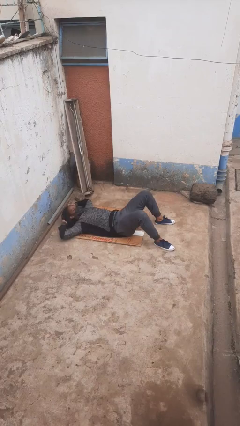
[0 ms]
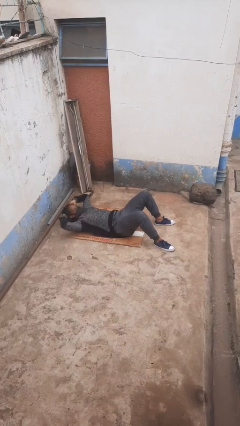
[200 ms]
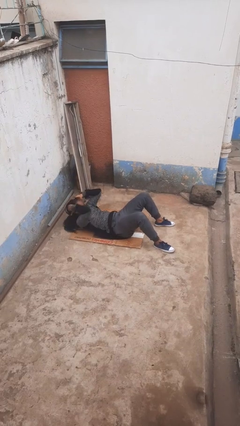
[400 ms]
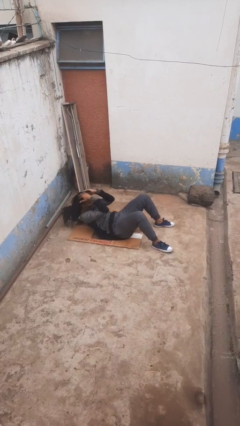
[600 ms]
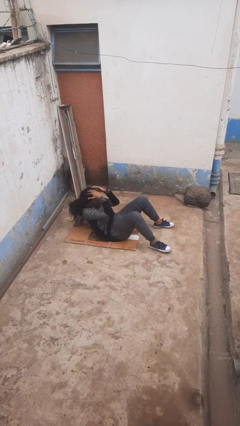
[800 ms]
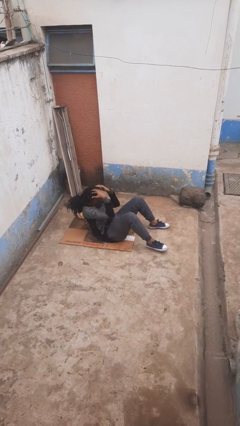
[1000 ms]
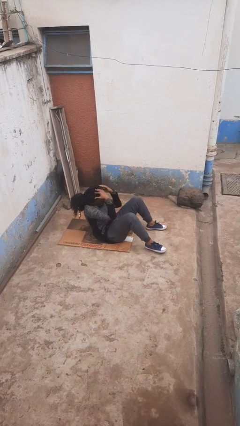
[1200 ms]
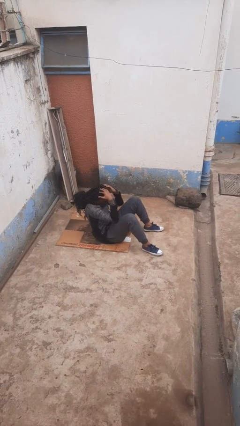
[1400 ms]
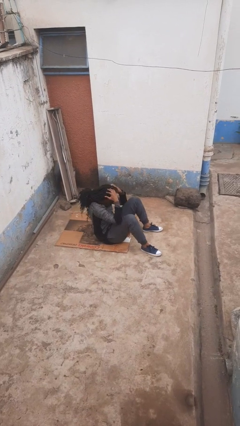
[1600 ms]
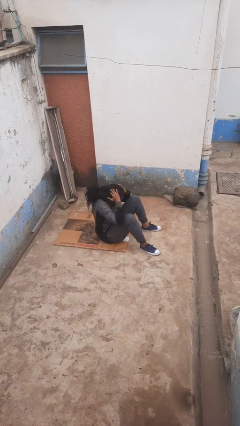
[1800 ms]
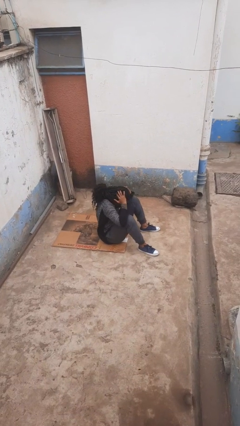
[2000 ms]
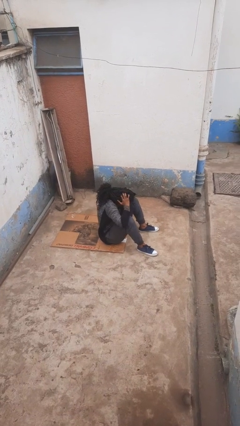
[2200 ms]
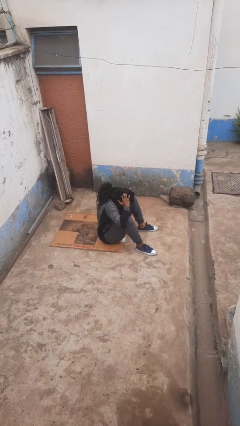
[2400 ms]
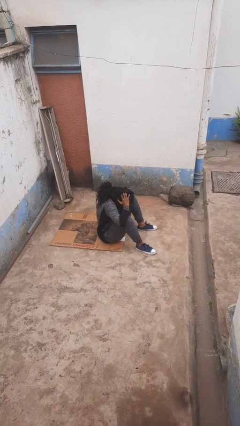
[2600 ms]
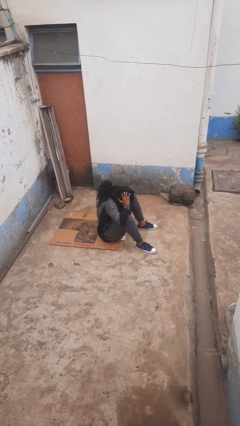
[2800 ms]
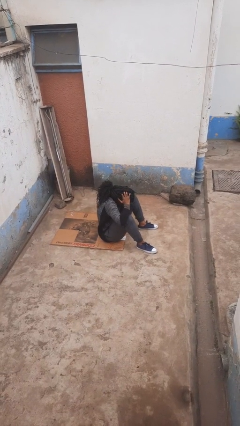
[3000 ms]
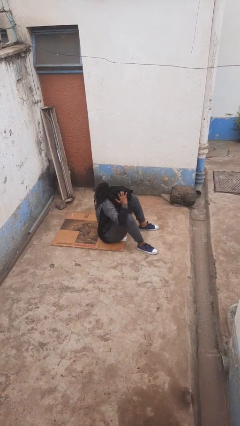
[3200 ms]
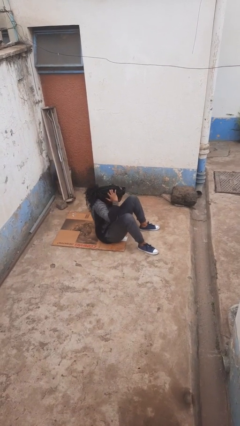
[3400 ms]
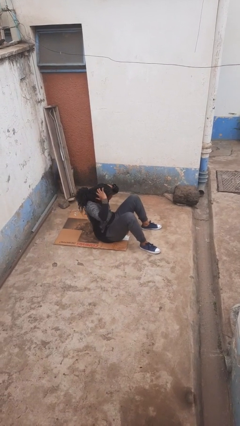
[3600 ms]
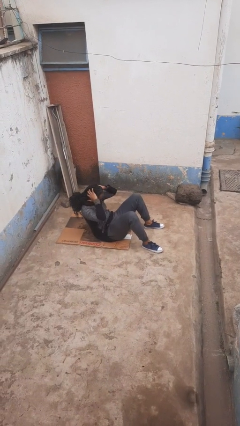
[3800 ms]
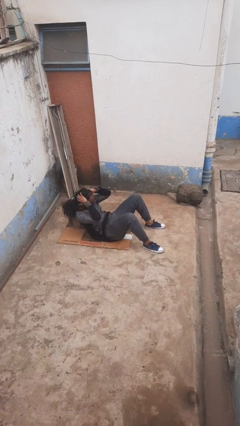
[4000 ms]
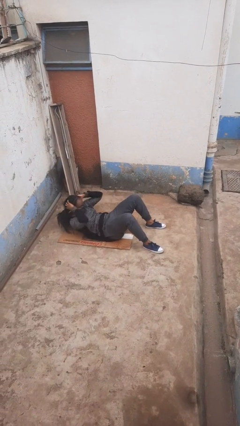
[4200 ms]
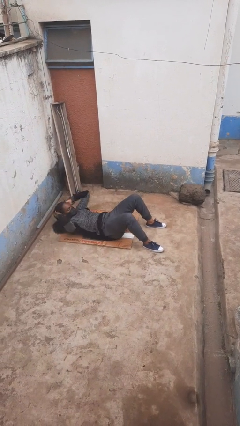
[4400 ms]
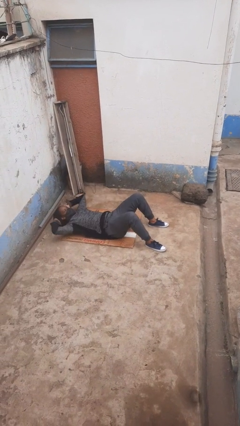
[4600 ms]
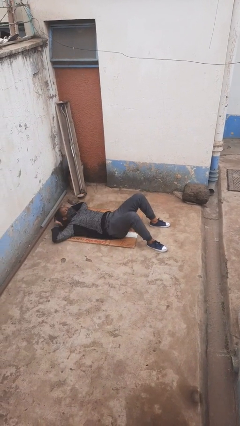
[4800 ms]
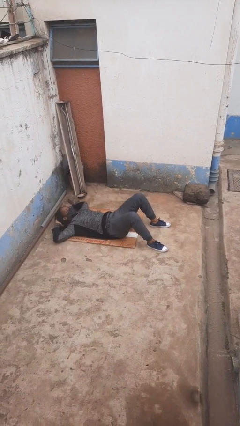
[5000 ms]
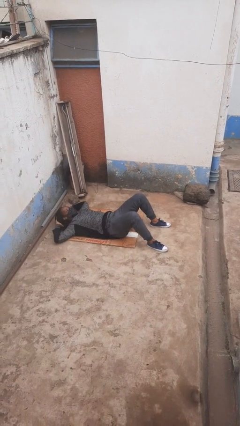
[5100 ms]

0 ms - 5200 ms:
person exercises with situp

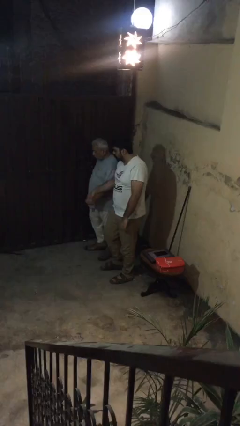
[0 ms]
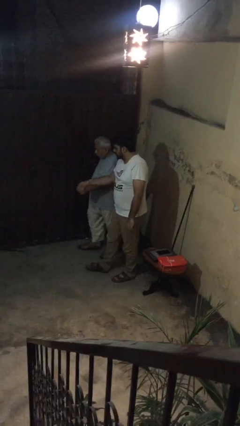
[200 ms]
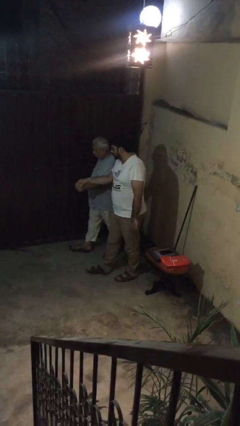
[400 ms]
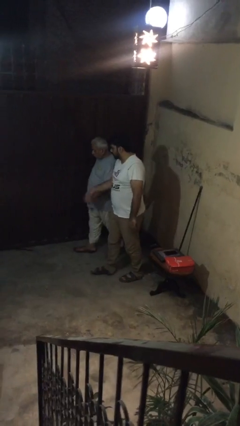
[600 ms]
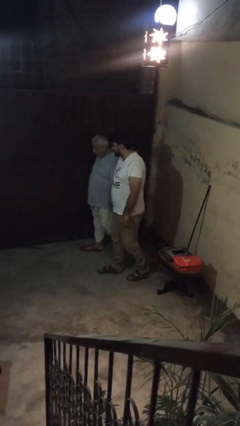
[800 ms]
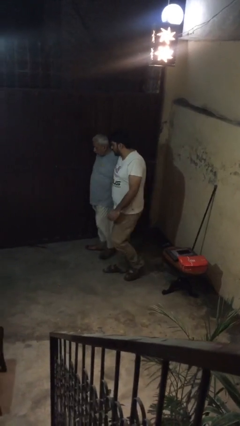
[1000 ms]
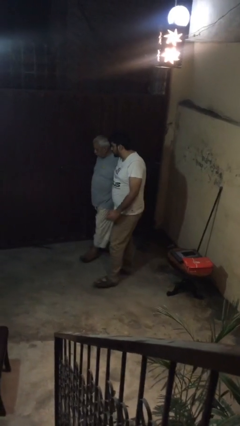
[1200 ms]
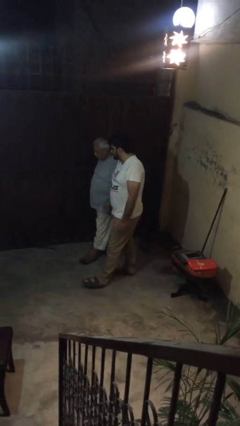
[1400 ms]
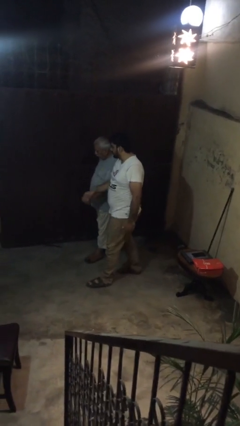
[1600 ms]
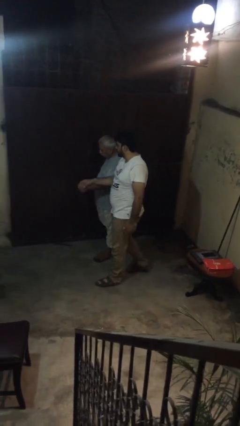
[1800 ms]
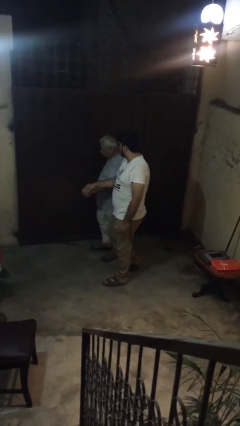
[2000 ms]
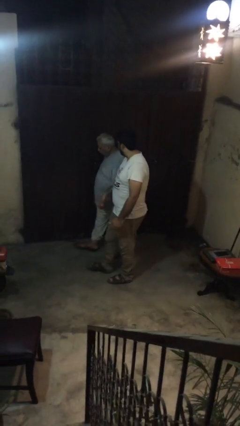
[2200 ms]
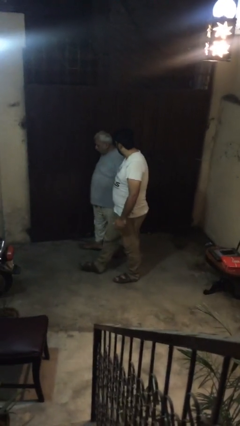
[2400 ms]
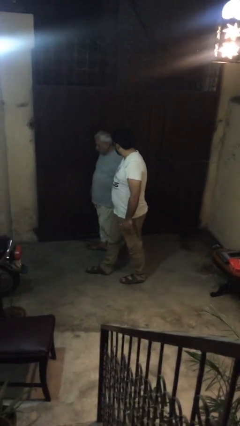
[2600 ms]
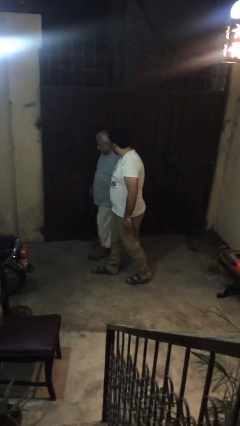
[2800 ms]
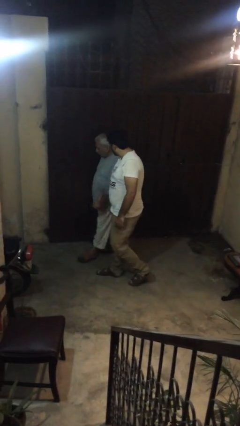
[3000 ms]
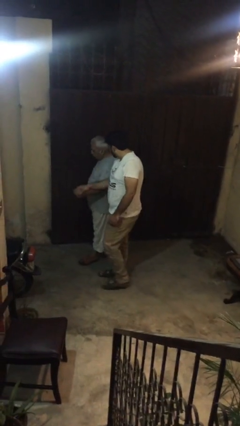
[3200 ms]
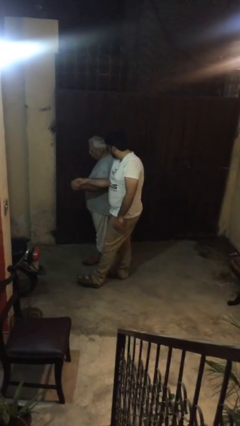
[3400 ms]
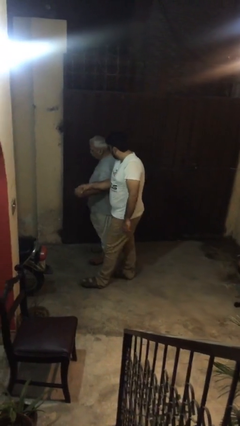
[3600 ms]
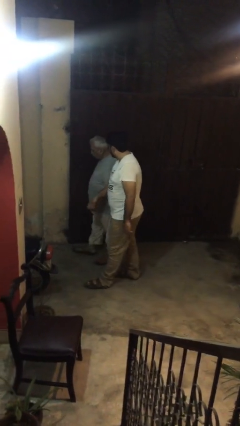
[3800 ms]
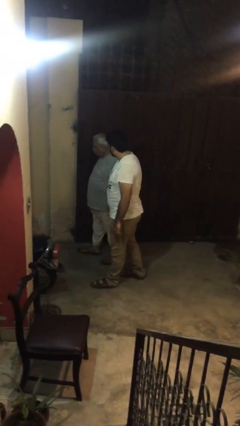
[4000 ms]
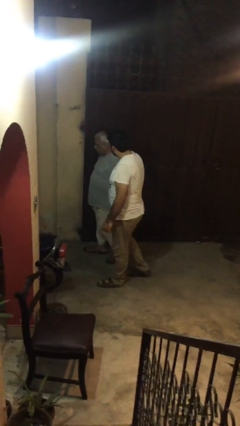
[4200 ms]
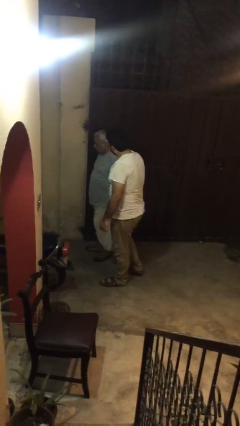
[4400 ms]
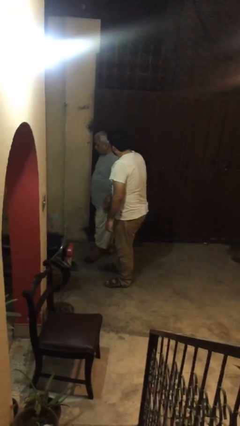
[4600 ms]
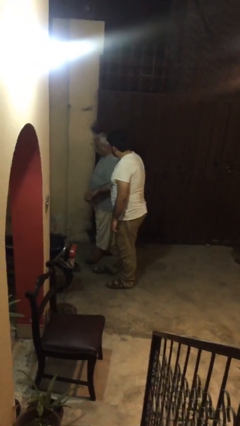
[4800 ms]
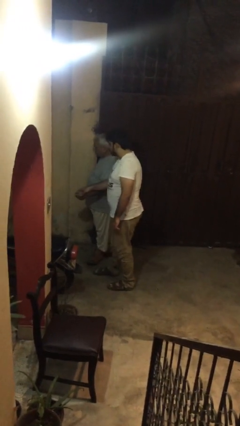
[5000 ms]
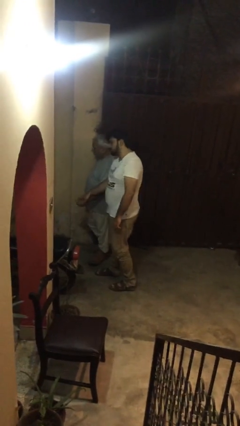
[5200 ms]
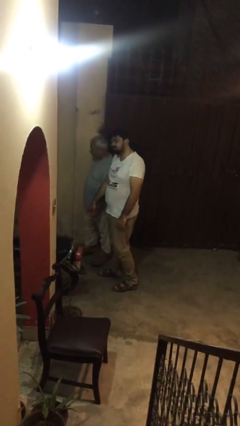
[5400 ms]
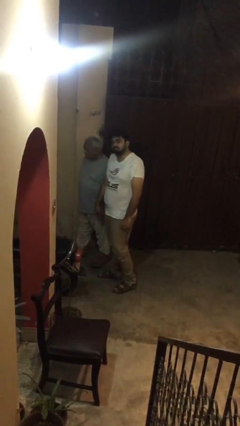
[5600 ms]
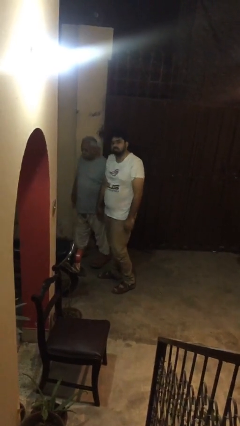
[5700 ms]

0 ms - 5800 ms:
person holds hand

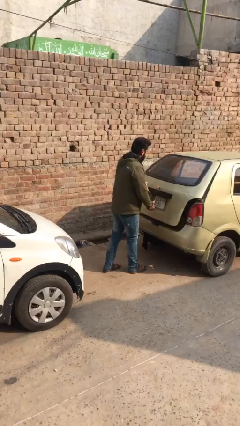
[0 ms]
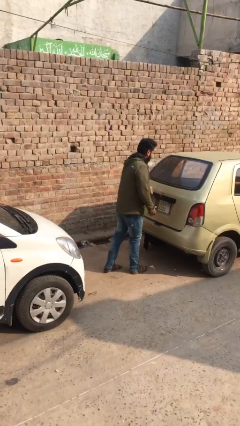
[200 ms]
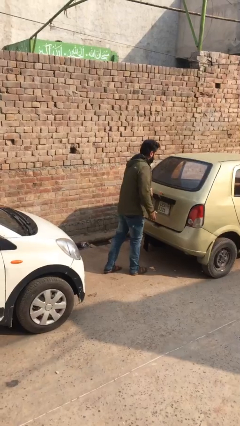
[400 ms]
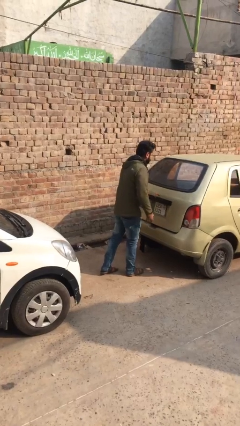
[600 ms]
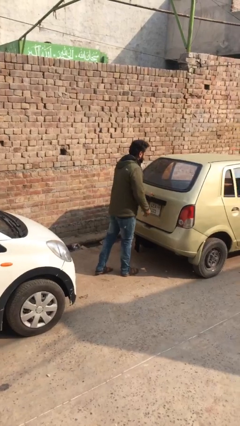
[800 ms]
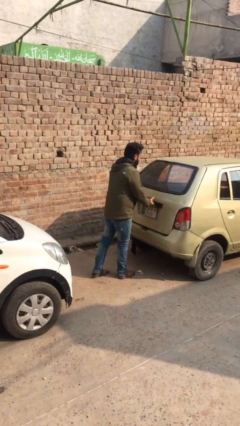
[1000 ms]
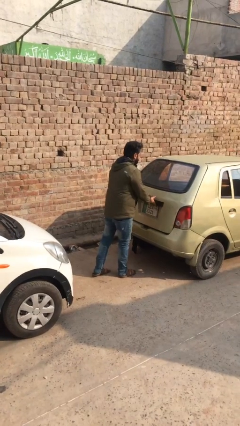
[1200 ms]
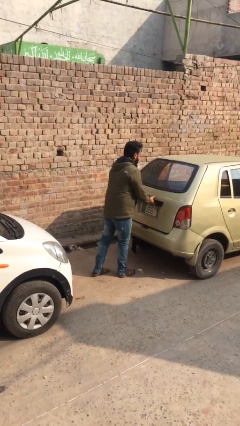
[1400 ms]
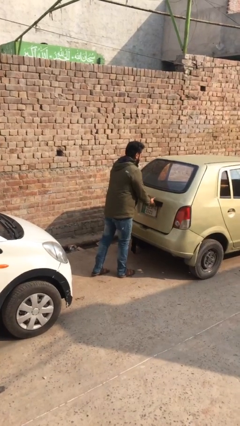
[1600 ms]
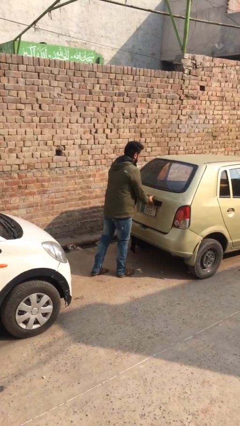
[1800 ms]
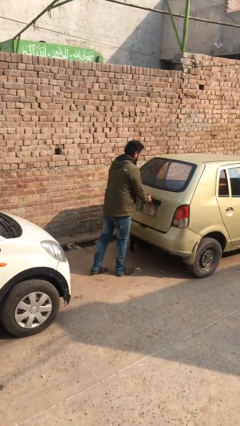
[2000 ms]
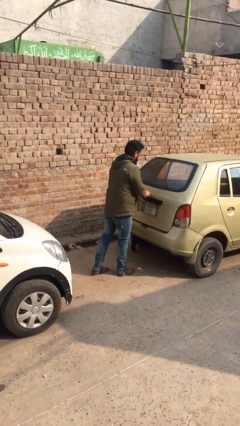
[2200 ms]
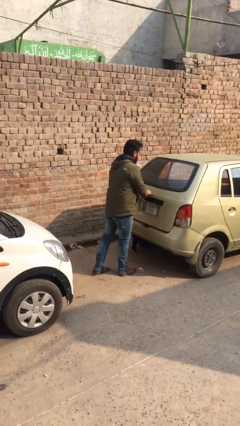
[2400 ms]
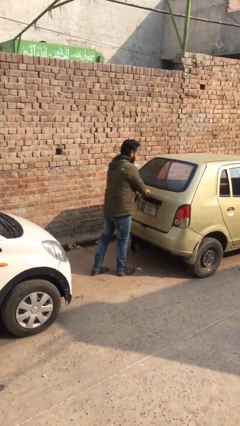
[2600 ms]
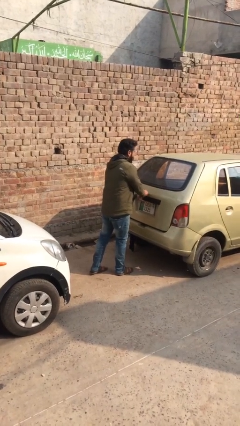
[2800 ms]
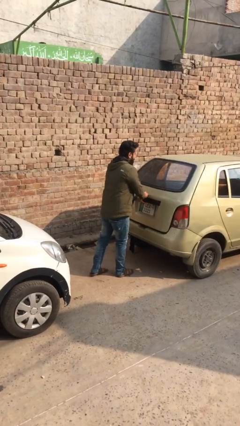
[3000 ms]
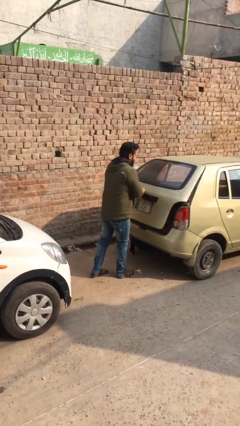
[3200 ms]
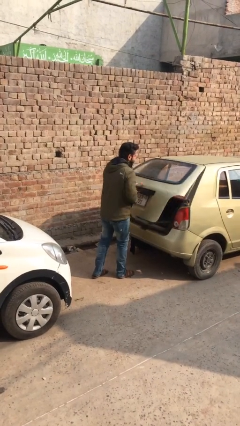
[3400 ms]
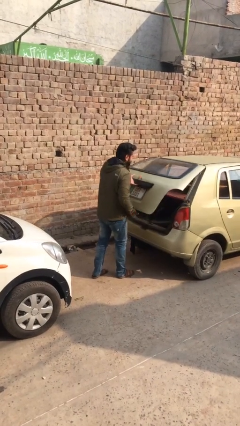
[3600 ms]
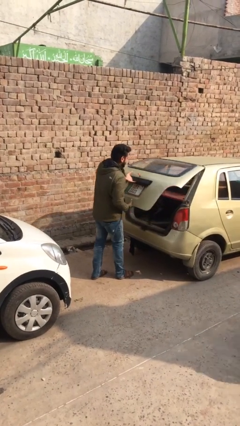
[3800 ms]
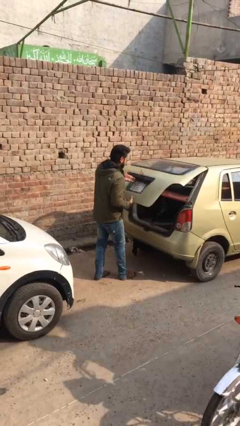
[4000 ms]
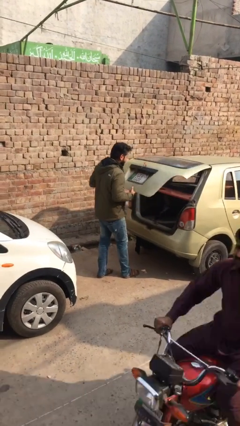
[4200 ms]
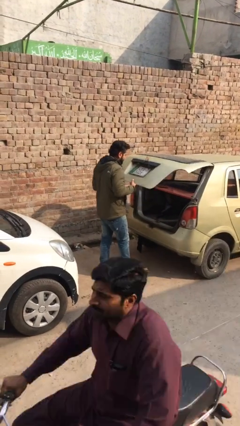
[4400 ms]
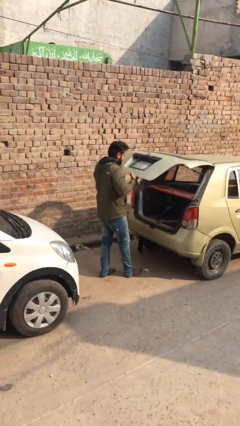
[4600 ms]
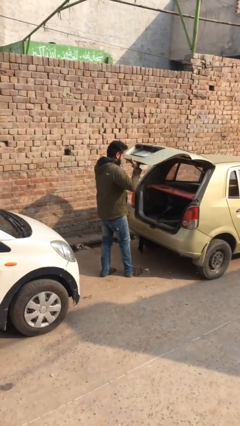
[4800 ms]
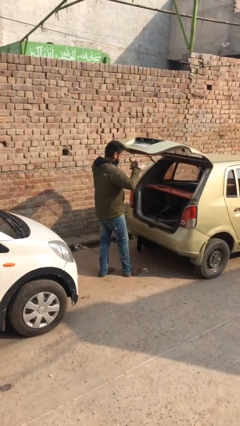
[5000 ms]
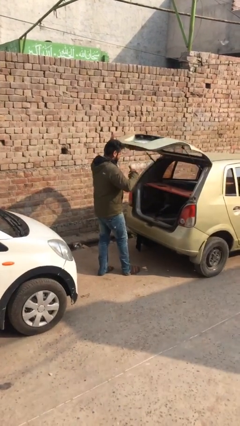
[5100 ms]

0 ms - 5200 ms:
person opens car trunk

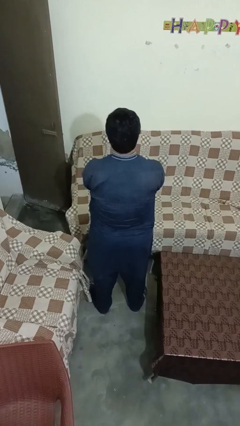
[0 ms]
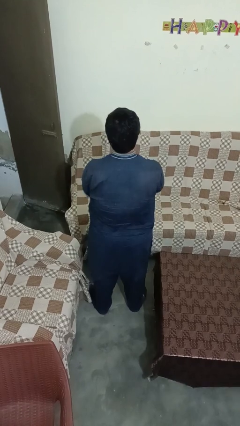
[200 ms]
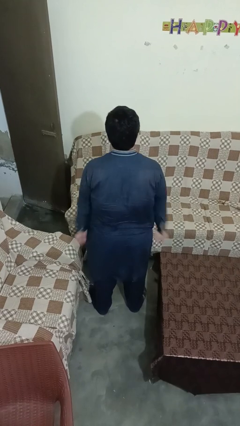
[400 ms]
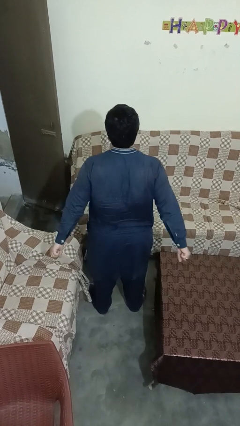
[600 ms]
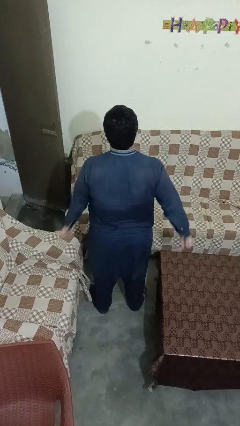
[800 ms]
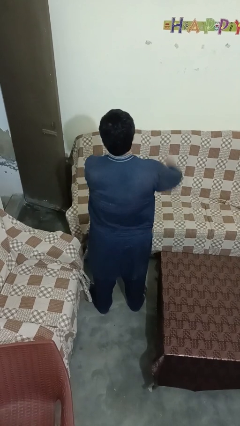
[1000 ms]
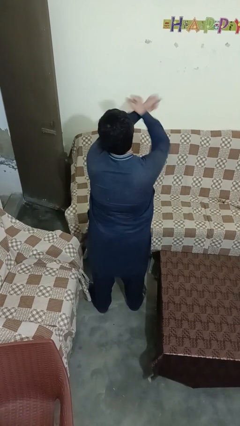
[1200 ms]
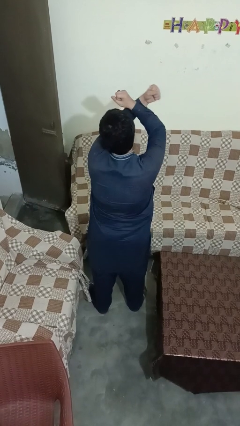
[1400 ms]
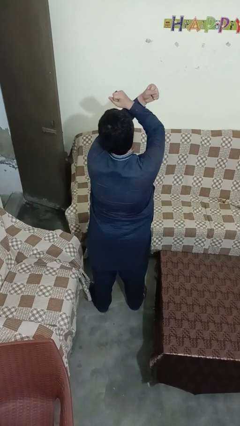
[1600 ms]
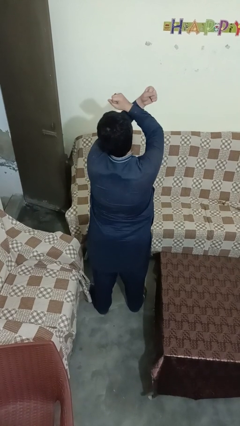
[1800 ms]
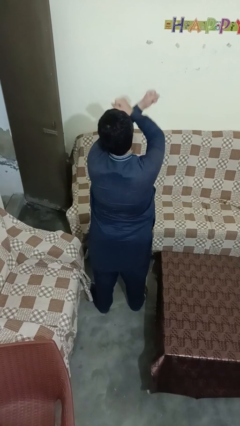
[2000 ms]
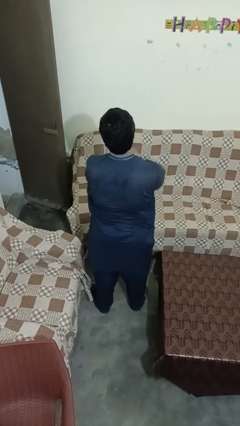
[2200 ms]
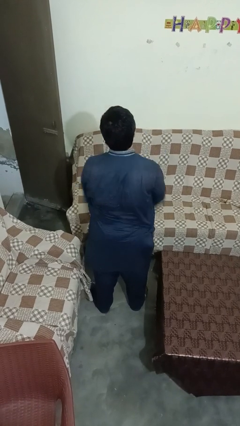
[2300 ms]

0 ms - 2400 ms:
person gestures arms x
